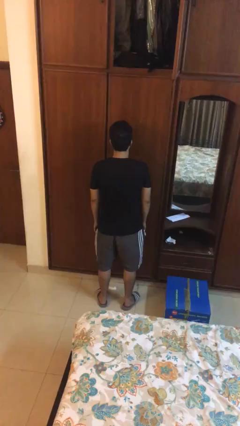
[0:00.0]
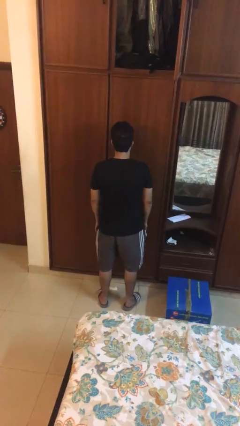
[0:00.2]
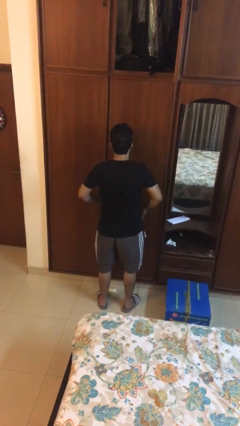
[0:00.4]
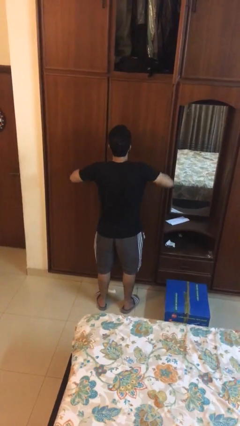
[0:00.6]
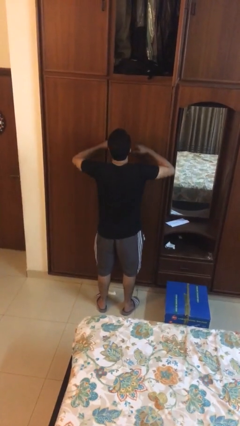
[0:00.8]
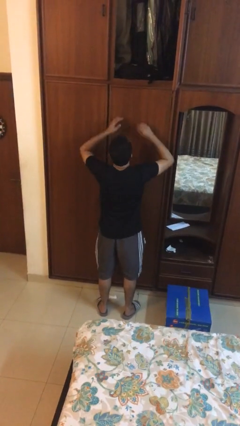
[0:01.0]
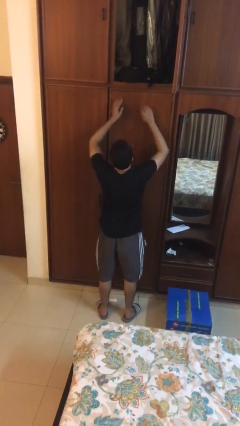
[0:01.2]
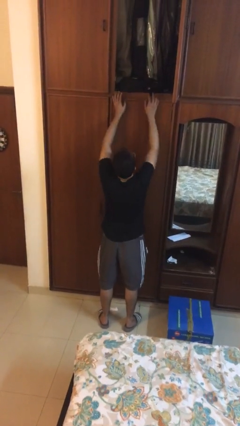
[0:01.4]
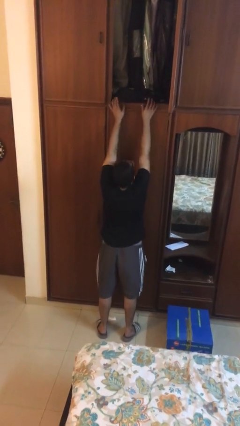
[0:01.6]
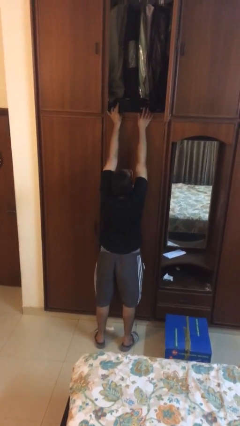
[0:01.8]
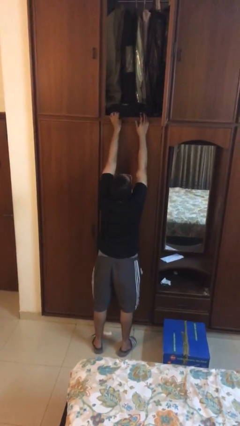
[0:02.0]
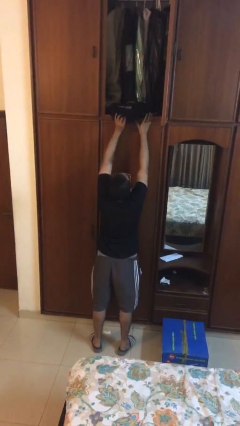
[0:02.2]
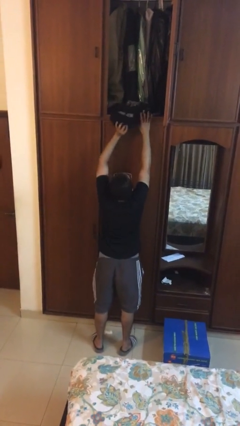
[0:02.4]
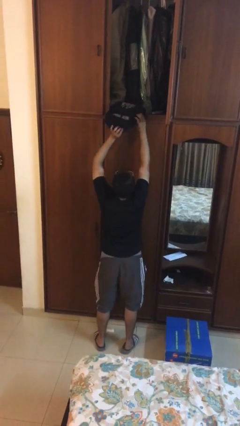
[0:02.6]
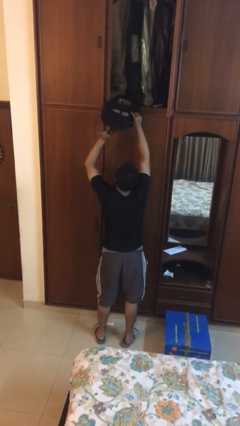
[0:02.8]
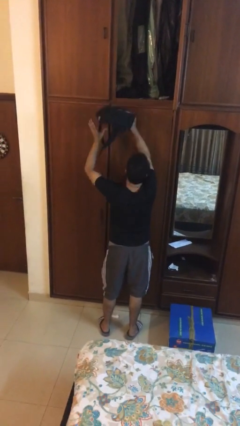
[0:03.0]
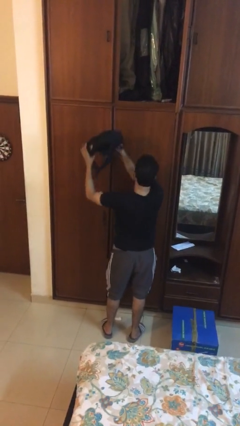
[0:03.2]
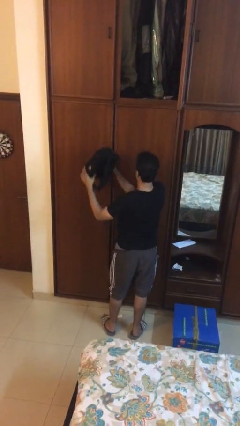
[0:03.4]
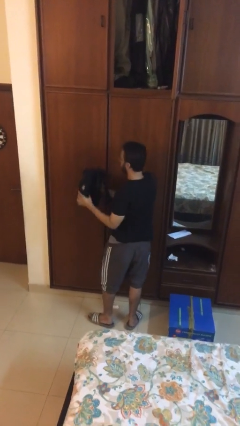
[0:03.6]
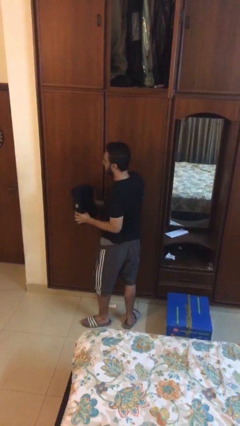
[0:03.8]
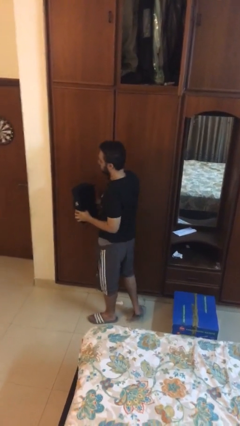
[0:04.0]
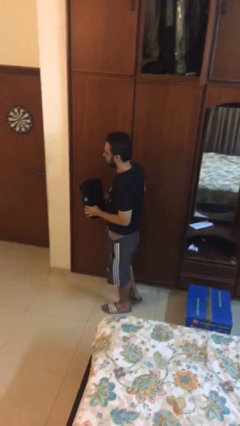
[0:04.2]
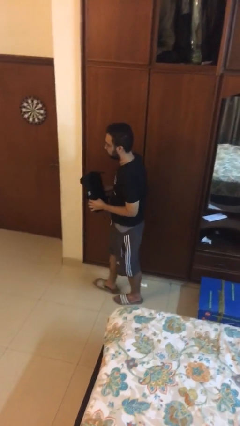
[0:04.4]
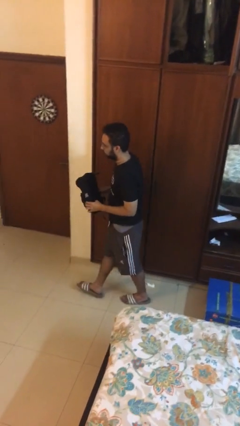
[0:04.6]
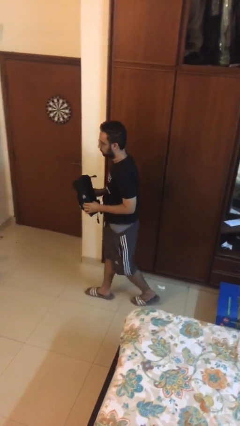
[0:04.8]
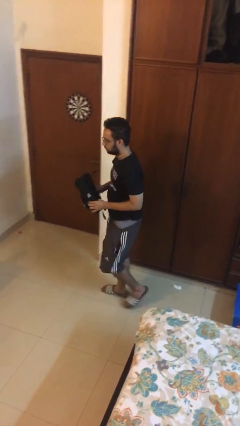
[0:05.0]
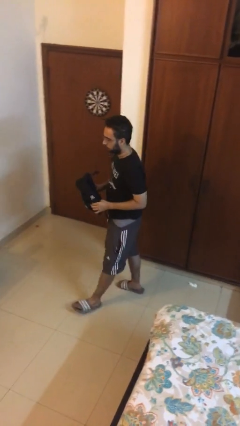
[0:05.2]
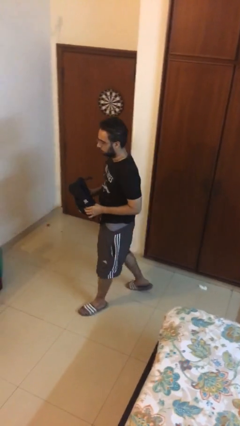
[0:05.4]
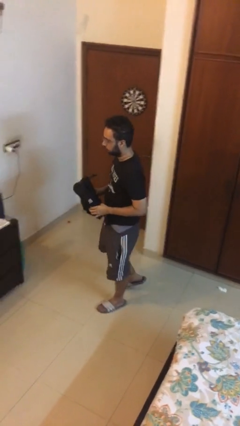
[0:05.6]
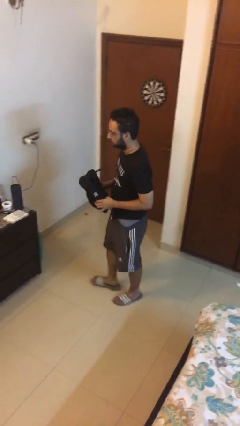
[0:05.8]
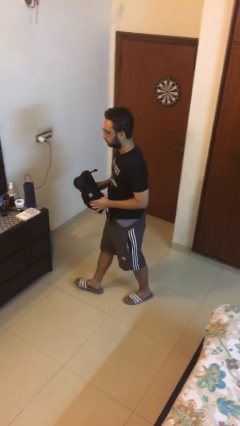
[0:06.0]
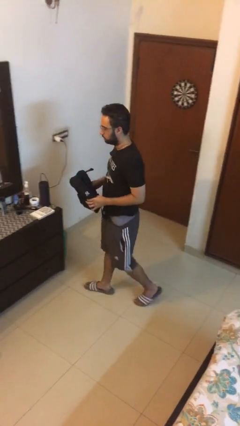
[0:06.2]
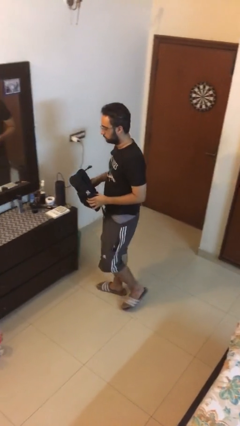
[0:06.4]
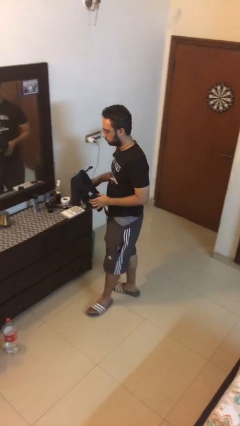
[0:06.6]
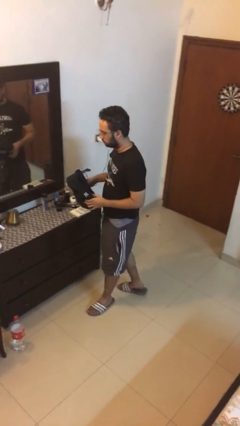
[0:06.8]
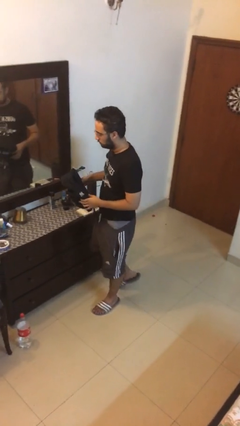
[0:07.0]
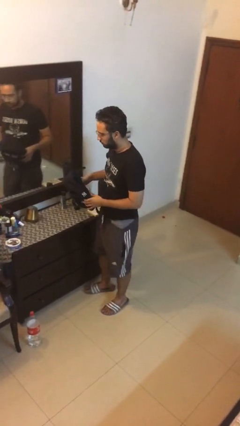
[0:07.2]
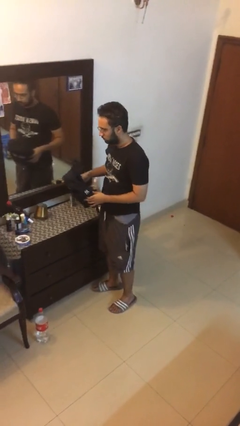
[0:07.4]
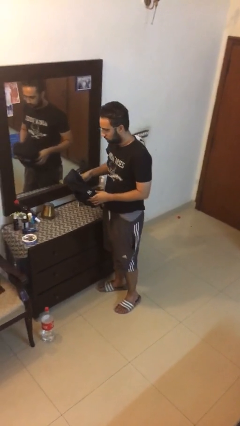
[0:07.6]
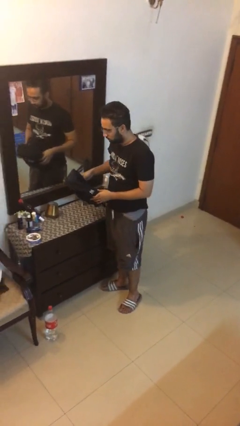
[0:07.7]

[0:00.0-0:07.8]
person picks up object from shelf

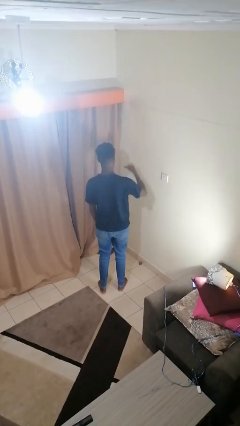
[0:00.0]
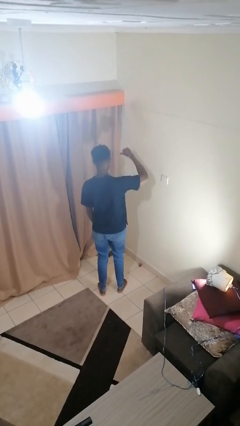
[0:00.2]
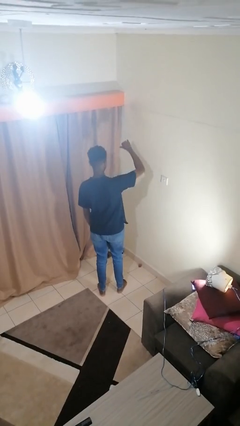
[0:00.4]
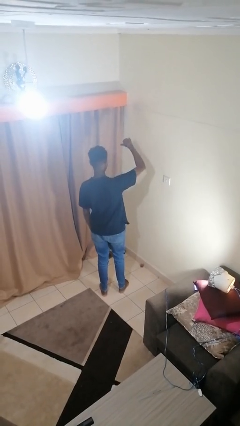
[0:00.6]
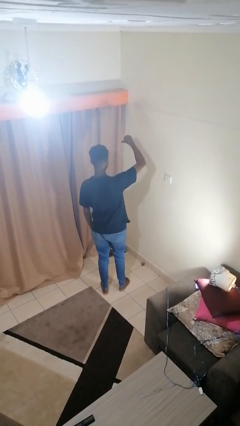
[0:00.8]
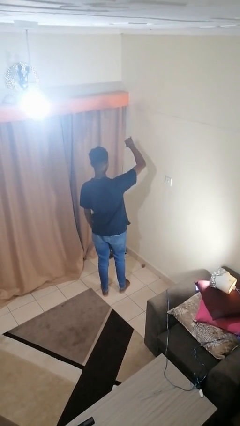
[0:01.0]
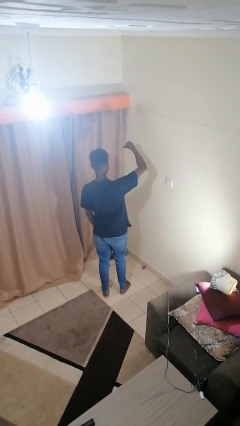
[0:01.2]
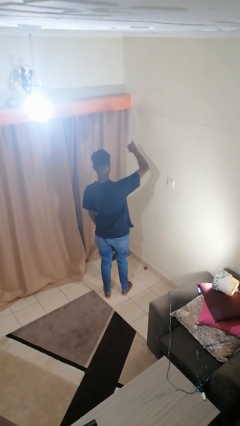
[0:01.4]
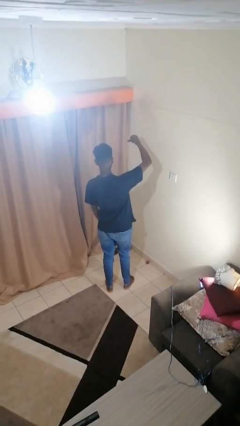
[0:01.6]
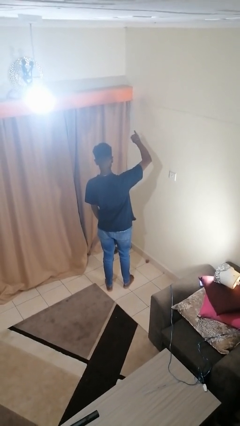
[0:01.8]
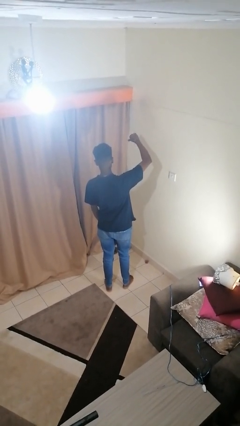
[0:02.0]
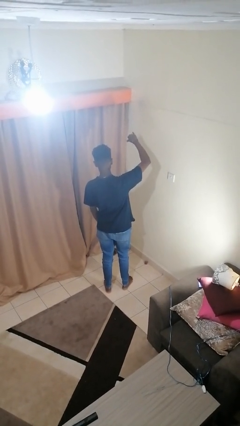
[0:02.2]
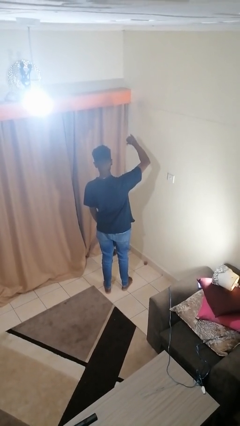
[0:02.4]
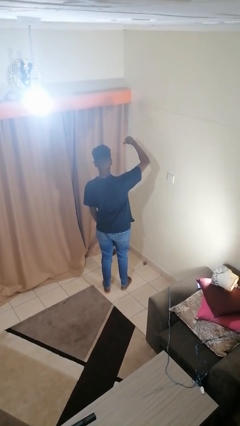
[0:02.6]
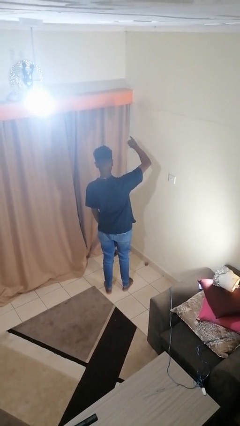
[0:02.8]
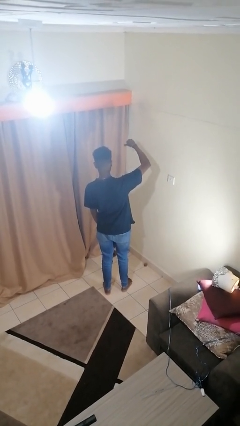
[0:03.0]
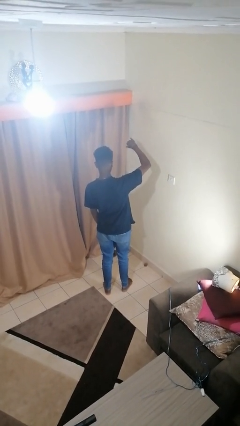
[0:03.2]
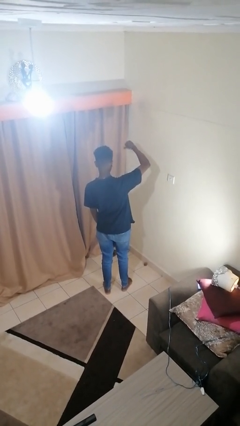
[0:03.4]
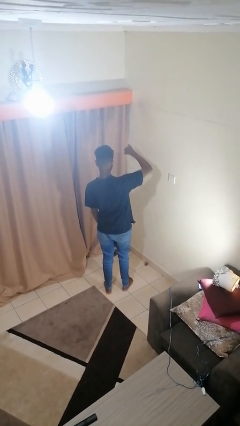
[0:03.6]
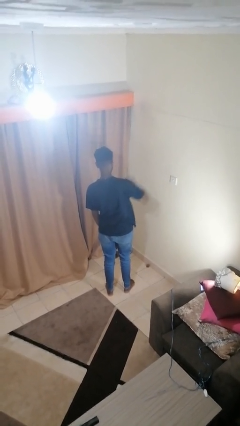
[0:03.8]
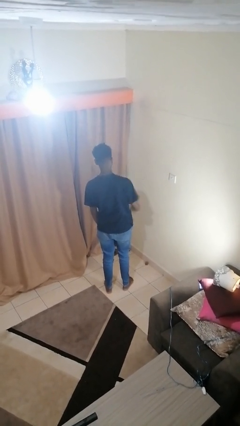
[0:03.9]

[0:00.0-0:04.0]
person gestures hang loose

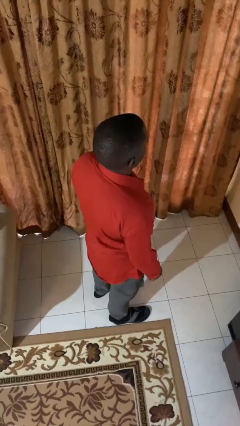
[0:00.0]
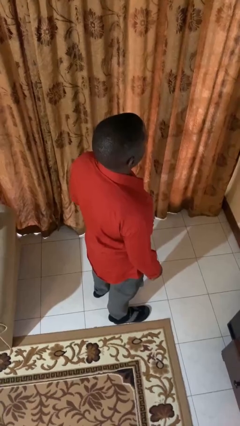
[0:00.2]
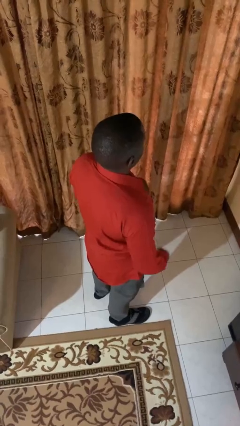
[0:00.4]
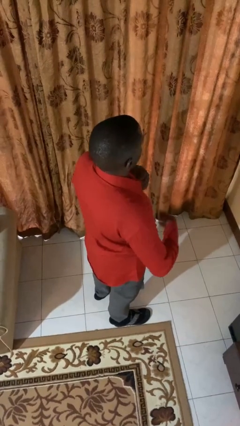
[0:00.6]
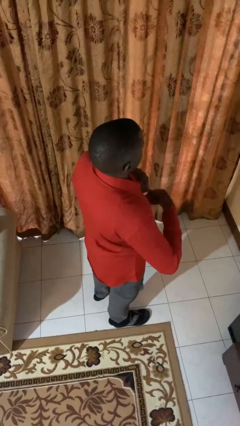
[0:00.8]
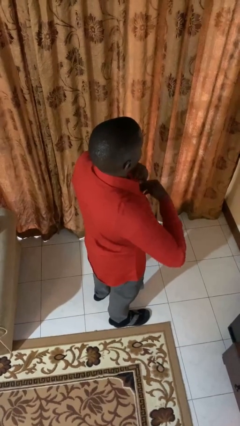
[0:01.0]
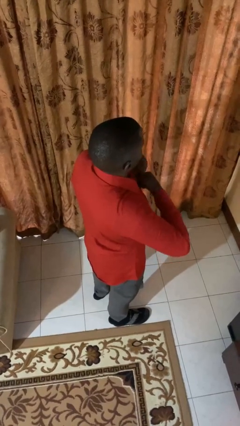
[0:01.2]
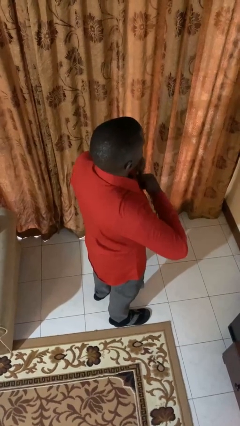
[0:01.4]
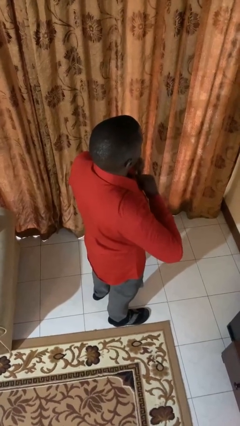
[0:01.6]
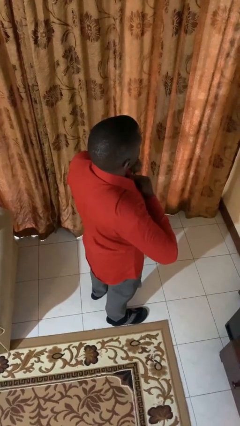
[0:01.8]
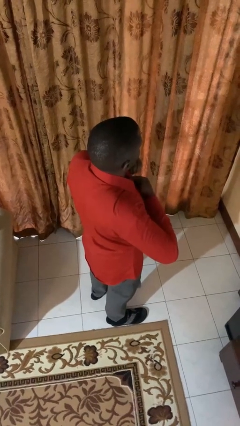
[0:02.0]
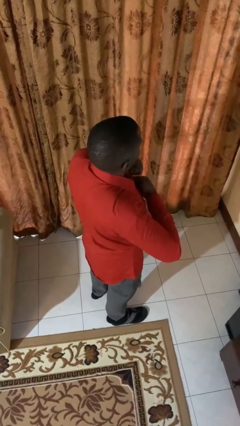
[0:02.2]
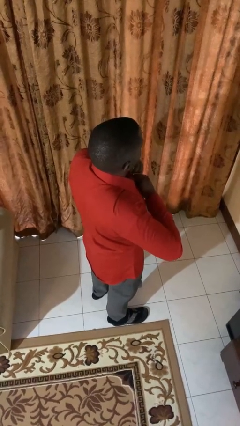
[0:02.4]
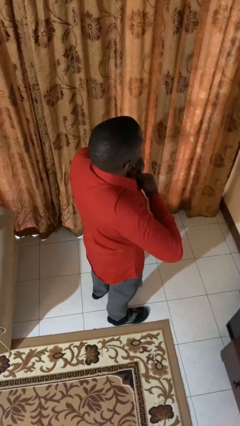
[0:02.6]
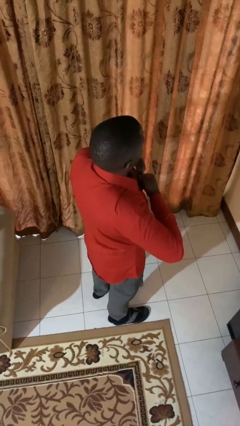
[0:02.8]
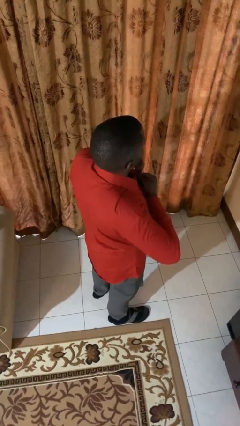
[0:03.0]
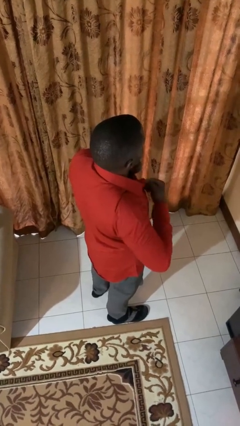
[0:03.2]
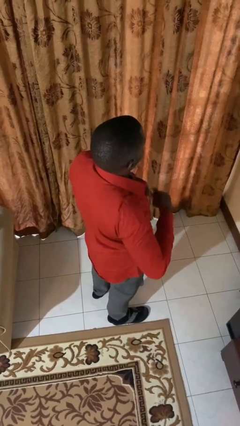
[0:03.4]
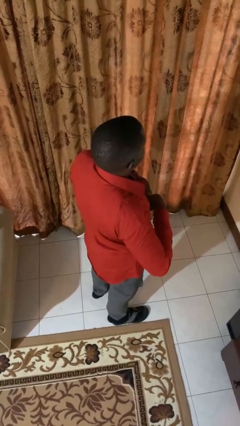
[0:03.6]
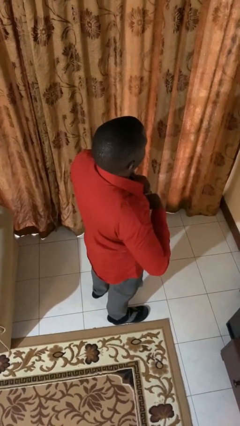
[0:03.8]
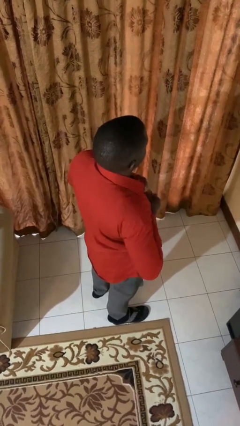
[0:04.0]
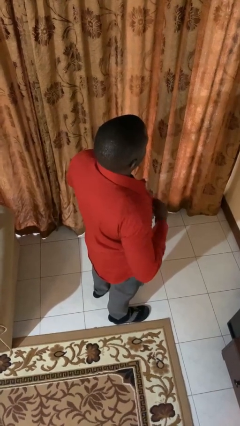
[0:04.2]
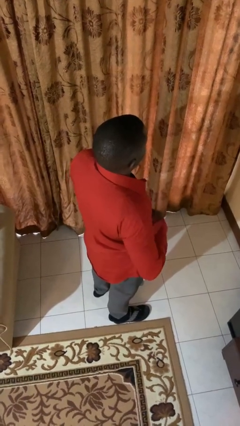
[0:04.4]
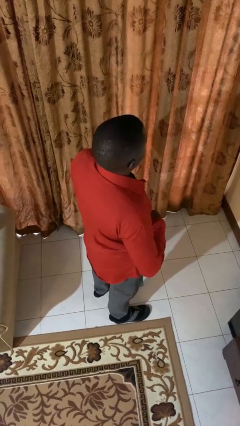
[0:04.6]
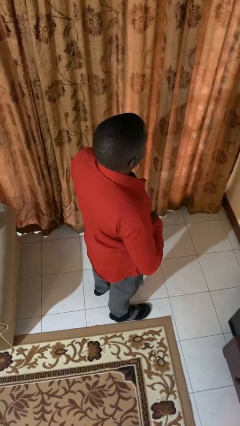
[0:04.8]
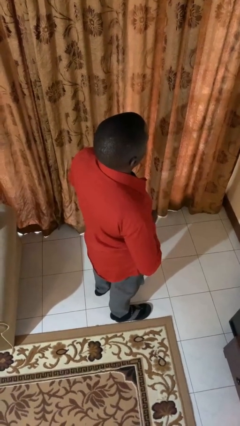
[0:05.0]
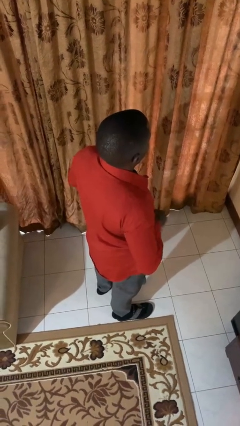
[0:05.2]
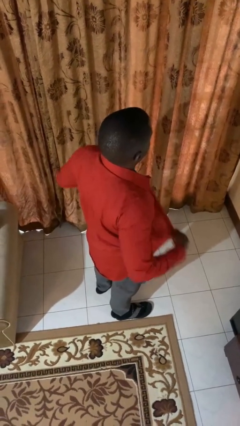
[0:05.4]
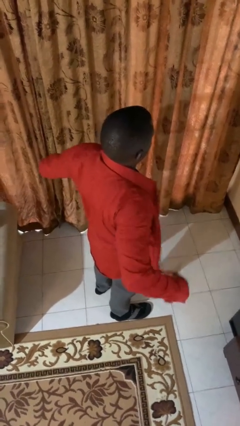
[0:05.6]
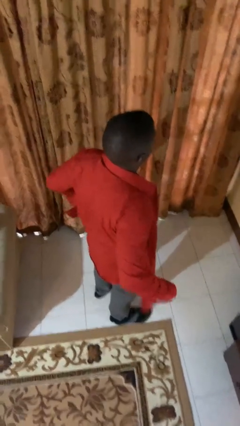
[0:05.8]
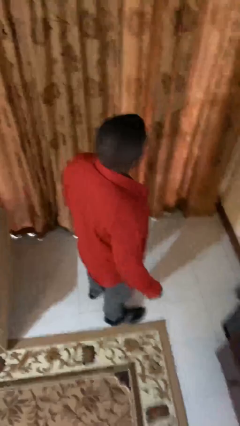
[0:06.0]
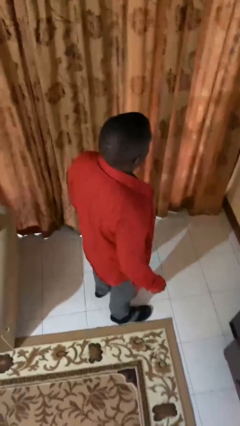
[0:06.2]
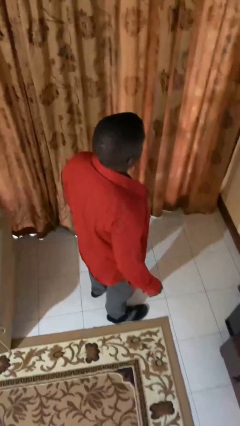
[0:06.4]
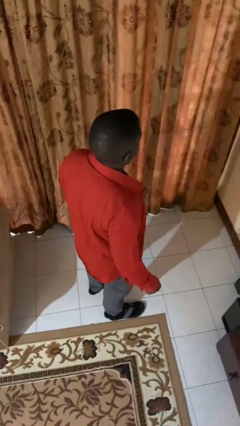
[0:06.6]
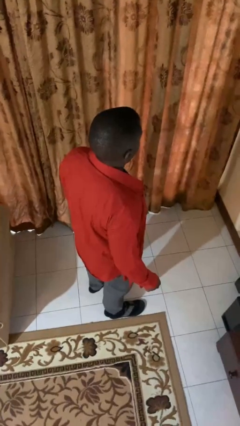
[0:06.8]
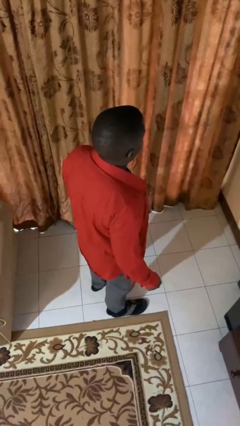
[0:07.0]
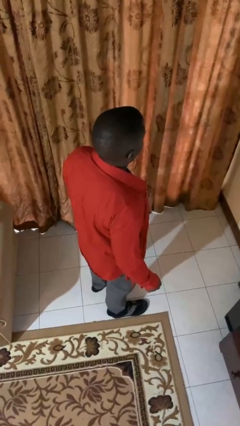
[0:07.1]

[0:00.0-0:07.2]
person unbuttons shirt
